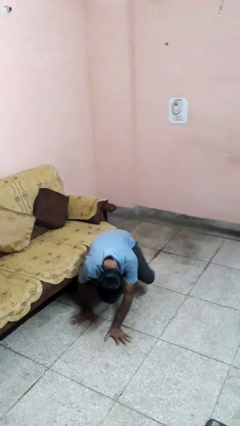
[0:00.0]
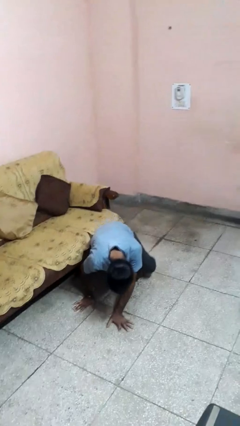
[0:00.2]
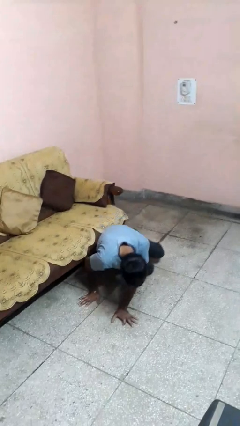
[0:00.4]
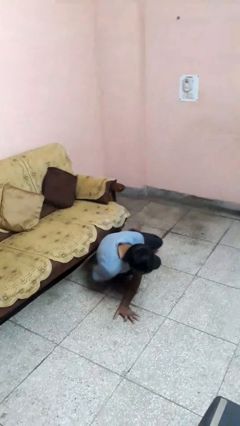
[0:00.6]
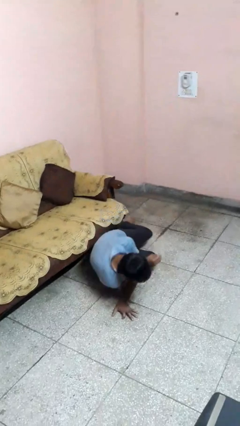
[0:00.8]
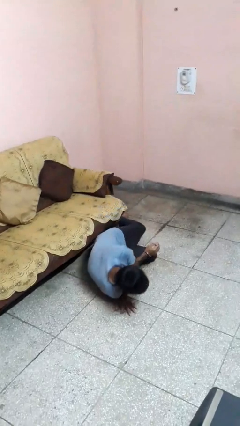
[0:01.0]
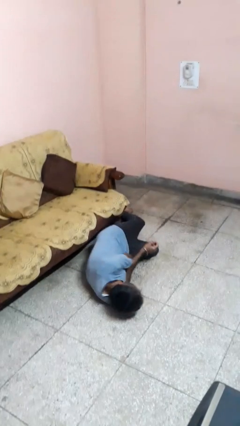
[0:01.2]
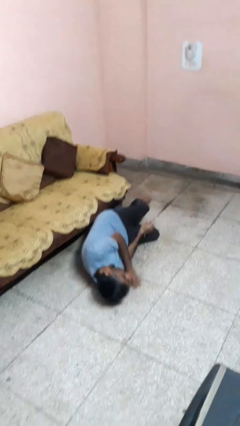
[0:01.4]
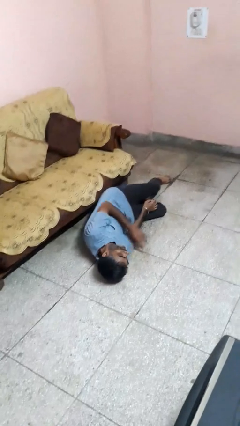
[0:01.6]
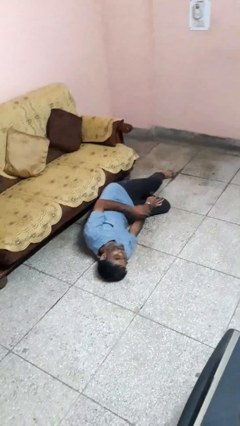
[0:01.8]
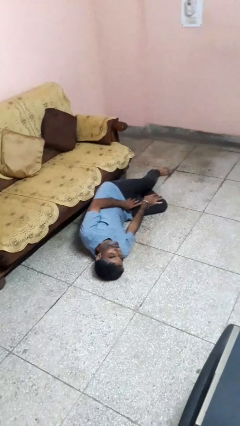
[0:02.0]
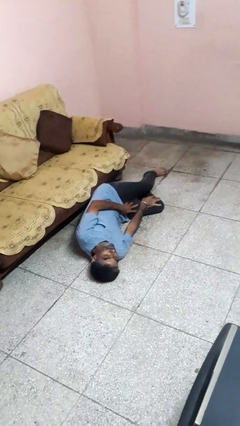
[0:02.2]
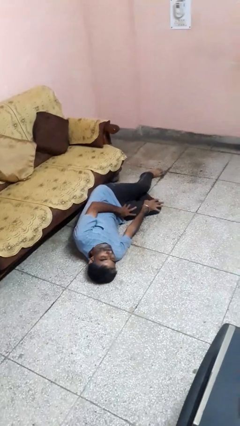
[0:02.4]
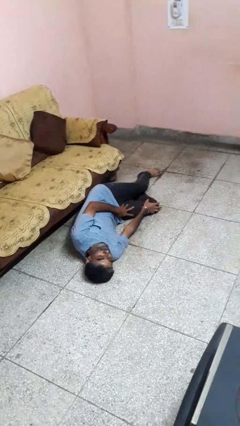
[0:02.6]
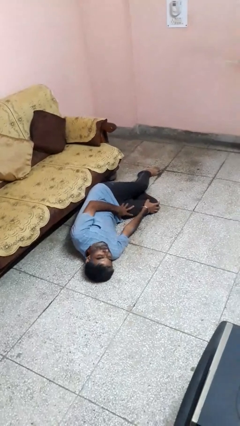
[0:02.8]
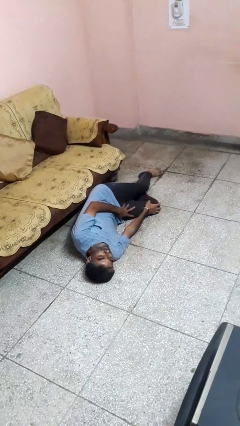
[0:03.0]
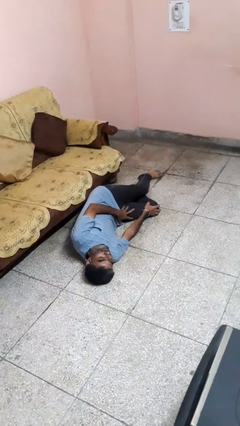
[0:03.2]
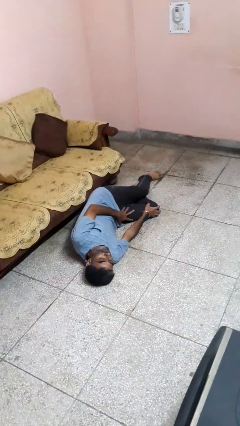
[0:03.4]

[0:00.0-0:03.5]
person lies down on floor

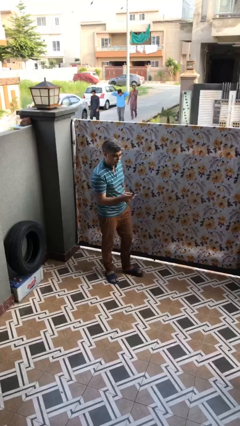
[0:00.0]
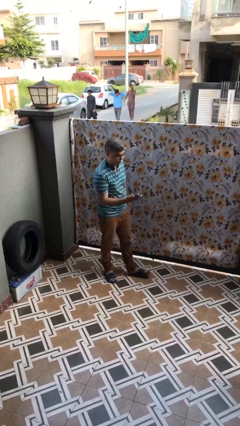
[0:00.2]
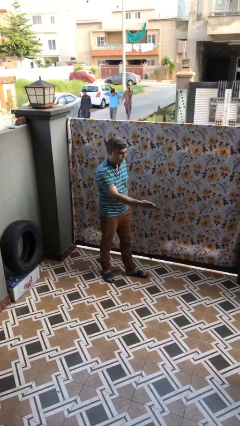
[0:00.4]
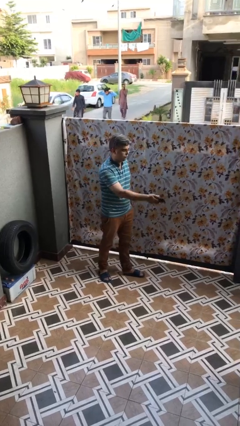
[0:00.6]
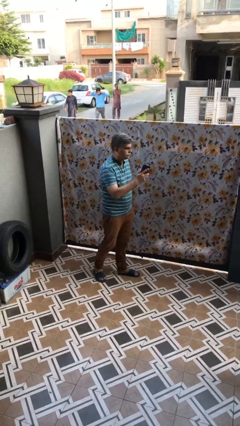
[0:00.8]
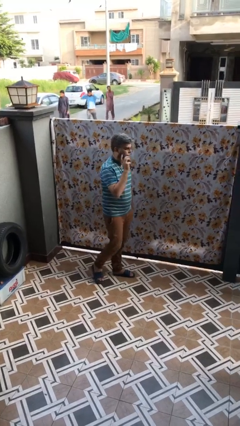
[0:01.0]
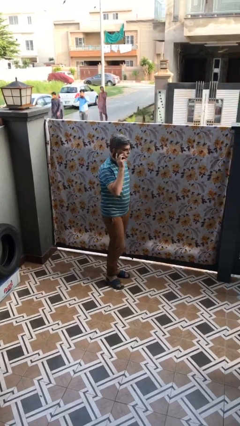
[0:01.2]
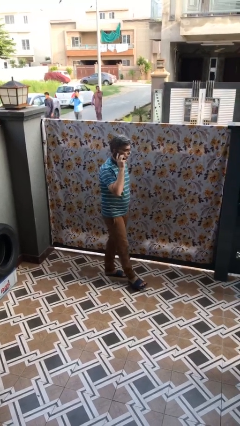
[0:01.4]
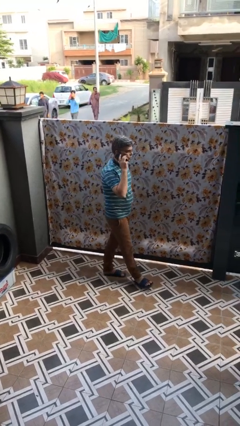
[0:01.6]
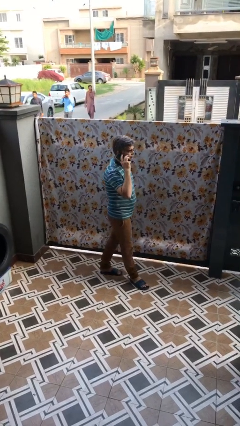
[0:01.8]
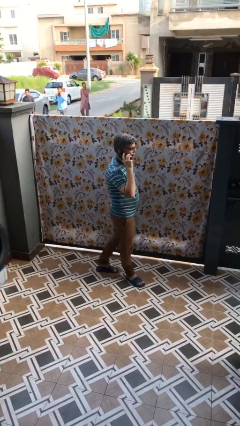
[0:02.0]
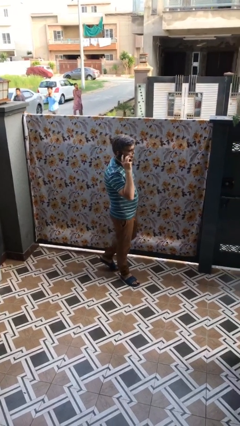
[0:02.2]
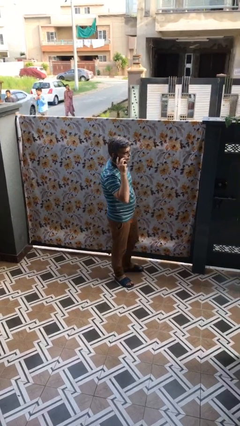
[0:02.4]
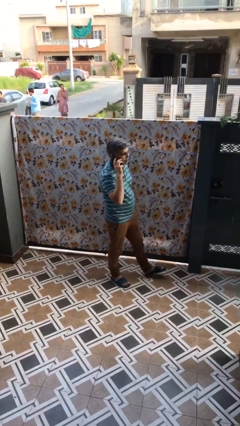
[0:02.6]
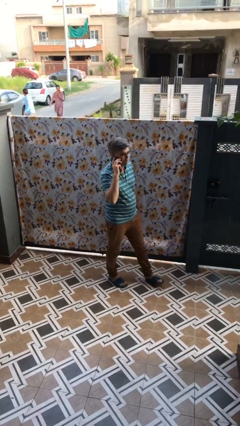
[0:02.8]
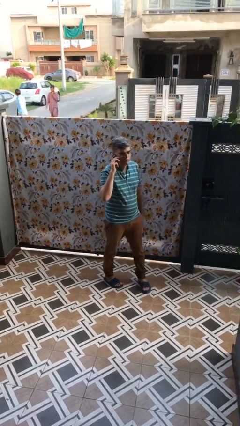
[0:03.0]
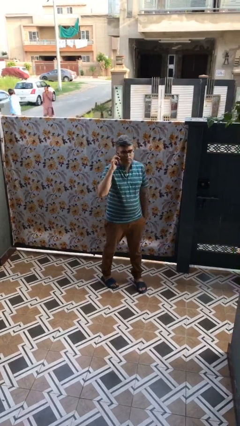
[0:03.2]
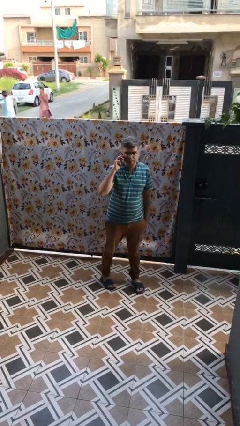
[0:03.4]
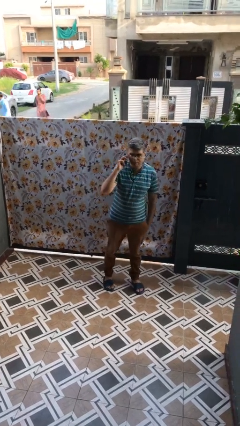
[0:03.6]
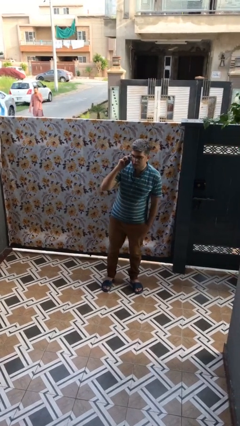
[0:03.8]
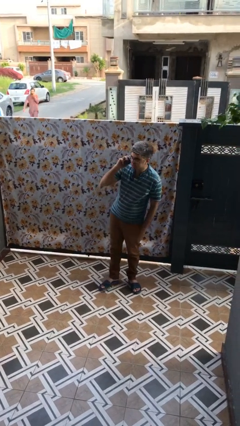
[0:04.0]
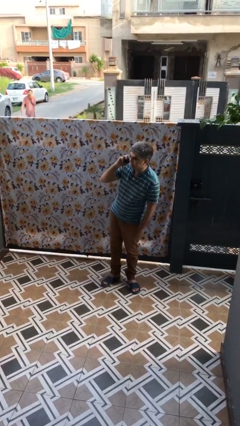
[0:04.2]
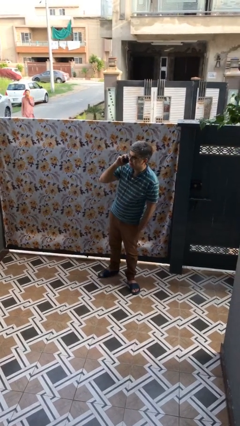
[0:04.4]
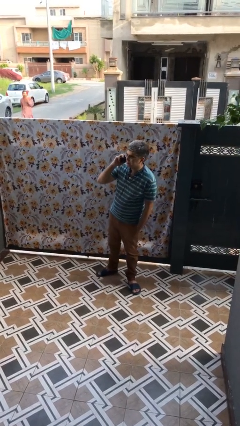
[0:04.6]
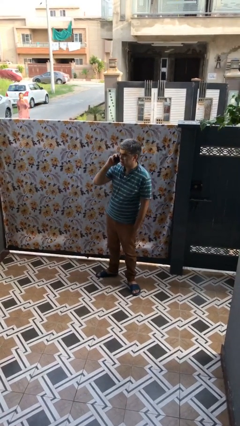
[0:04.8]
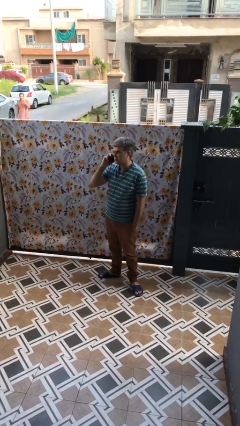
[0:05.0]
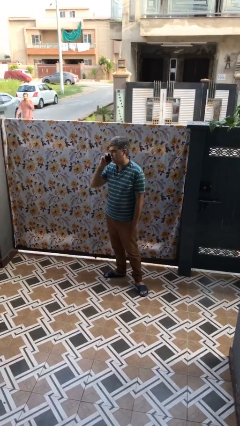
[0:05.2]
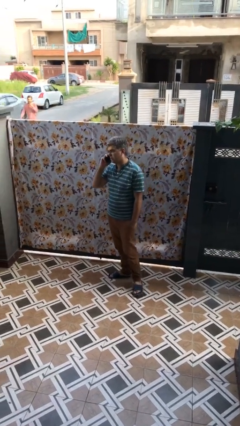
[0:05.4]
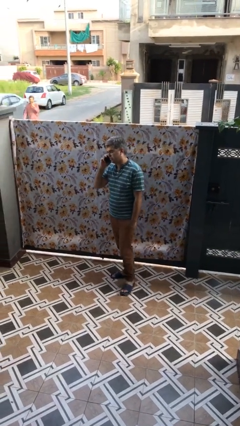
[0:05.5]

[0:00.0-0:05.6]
person talks on phone

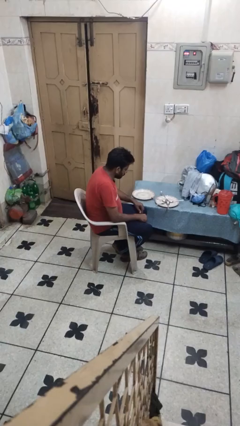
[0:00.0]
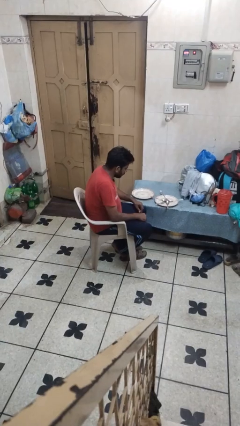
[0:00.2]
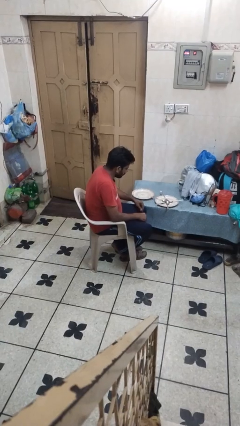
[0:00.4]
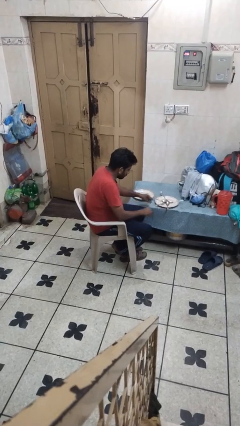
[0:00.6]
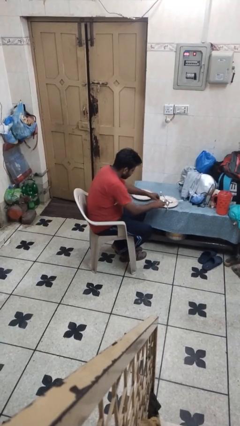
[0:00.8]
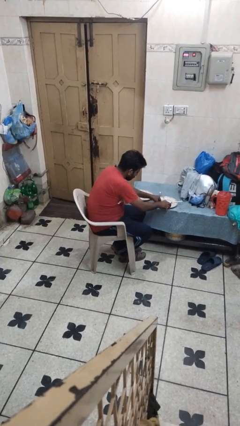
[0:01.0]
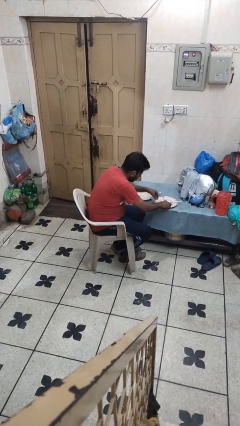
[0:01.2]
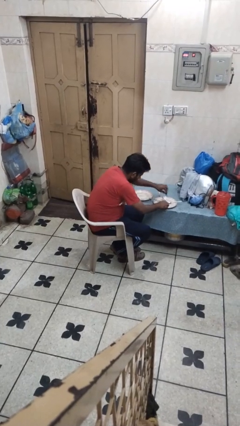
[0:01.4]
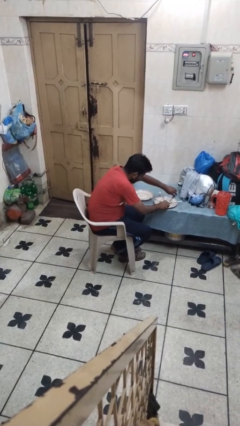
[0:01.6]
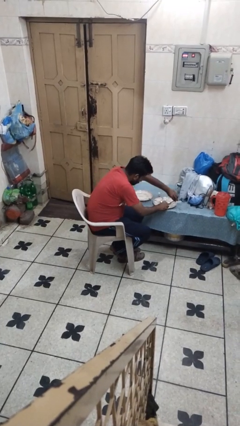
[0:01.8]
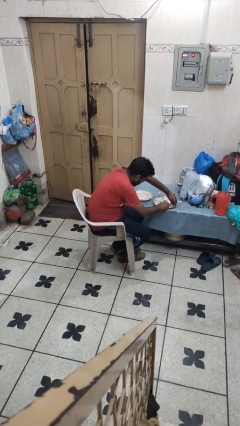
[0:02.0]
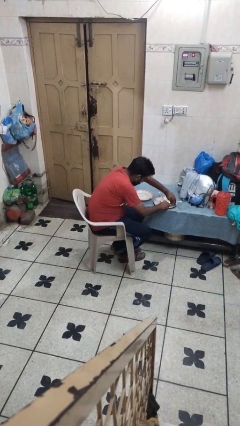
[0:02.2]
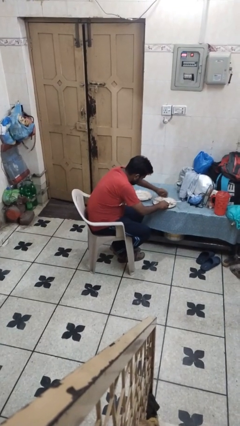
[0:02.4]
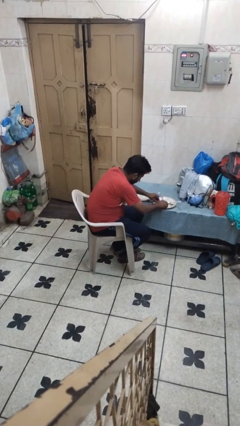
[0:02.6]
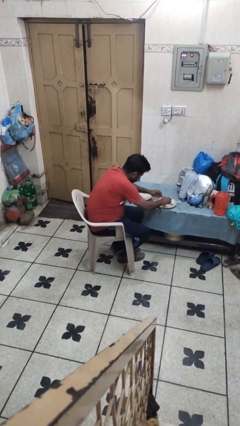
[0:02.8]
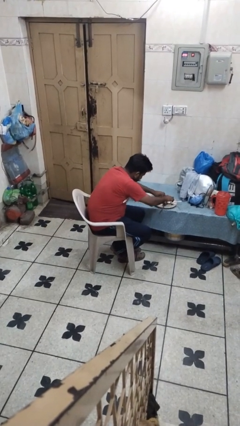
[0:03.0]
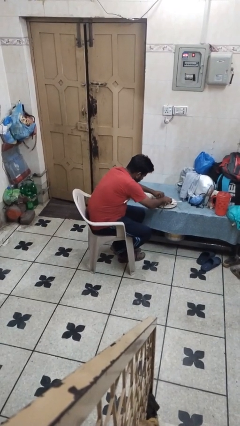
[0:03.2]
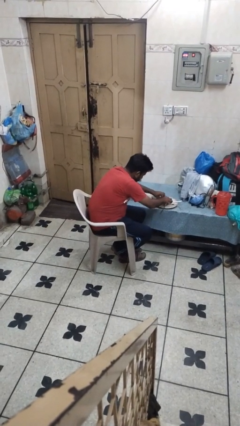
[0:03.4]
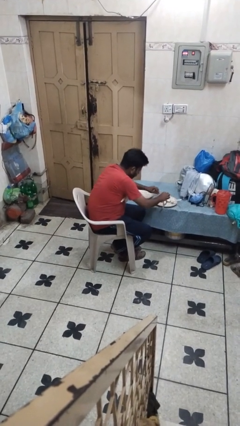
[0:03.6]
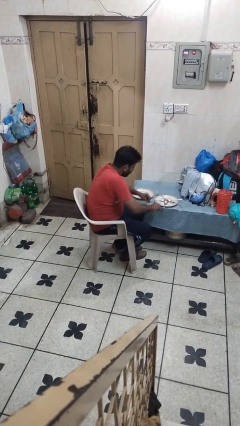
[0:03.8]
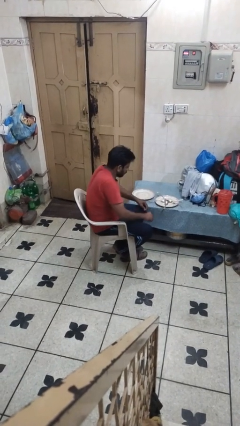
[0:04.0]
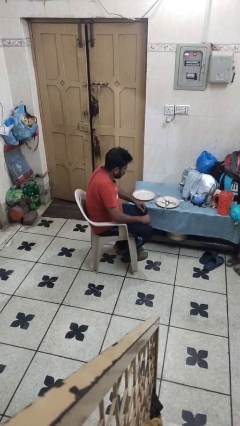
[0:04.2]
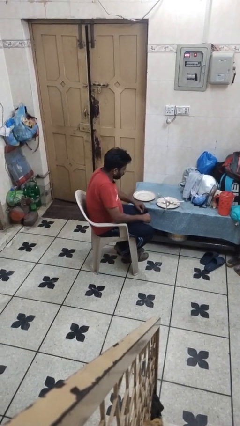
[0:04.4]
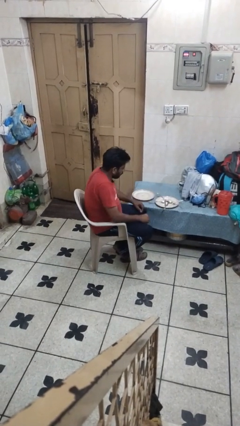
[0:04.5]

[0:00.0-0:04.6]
person sets table

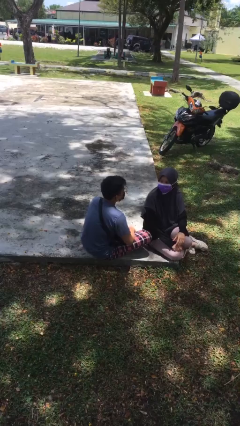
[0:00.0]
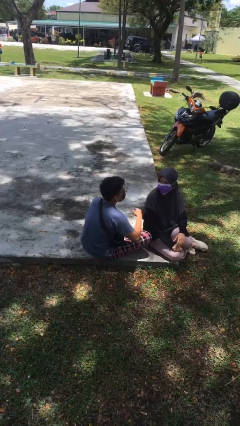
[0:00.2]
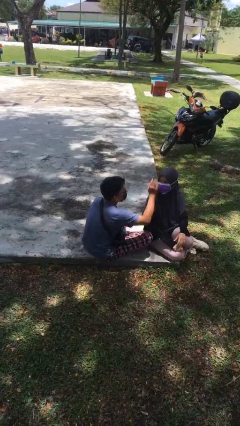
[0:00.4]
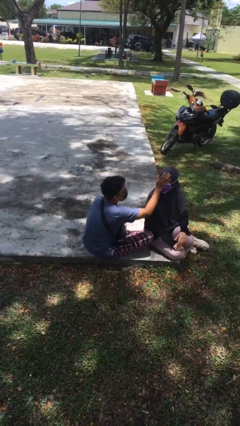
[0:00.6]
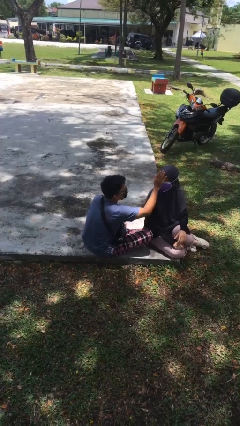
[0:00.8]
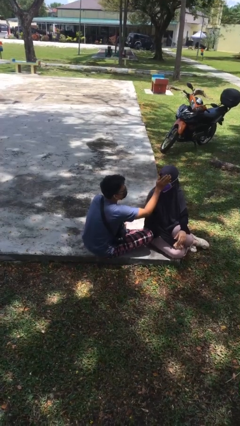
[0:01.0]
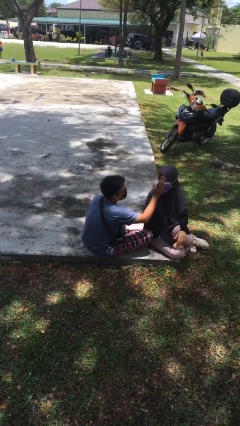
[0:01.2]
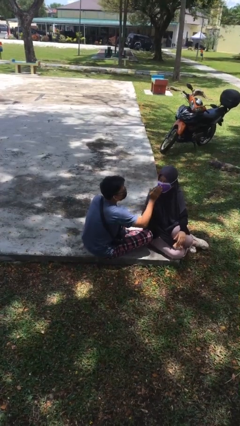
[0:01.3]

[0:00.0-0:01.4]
person touches face of person

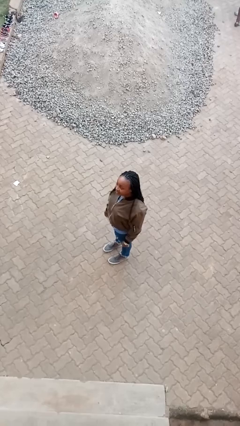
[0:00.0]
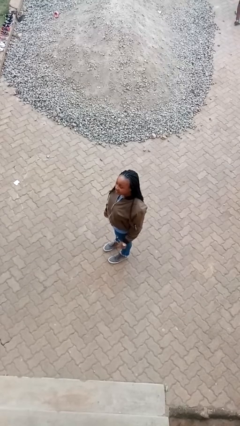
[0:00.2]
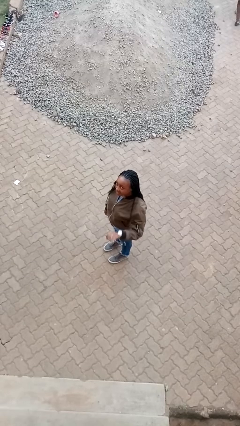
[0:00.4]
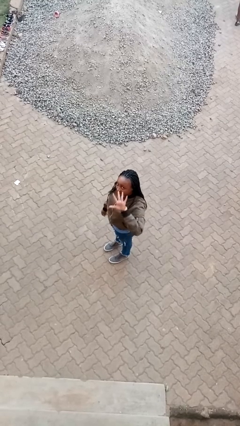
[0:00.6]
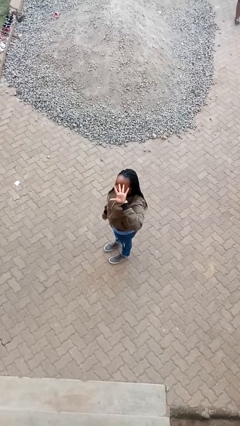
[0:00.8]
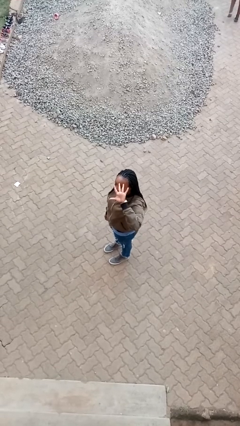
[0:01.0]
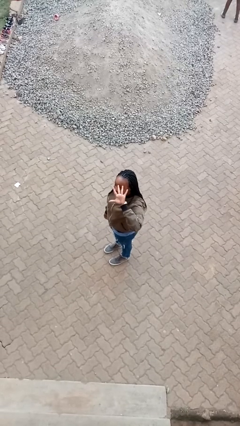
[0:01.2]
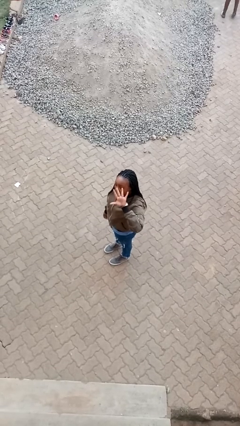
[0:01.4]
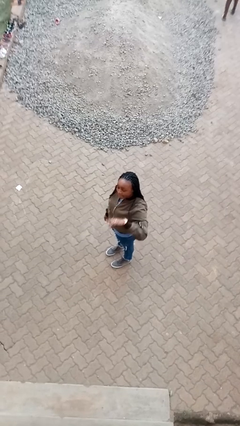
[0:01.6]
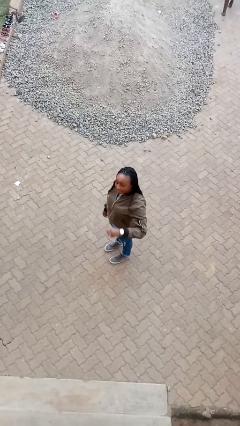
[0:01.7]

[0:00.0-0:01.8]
person gestures number five

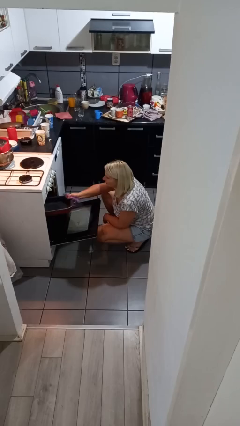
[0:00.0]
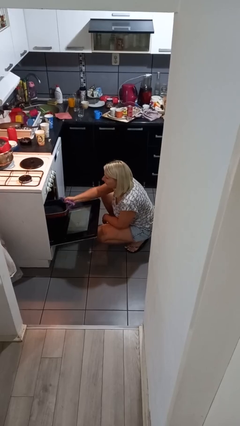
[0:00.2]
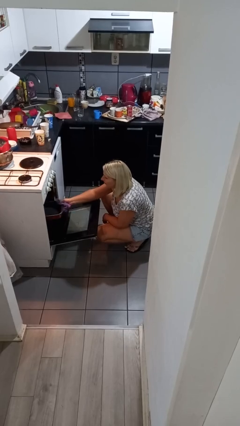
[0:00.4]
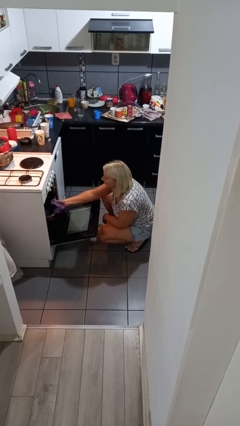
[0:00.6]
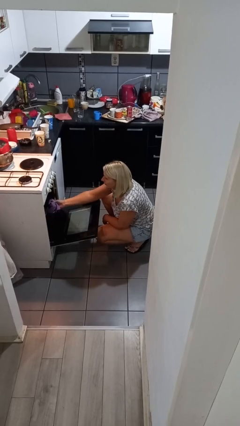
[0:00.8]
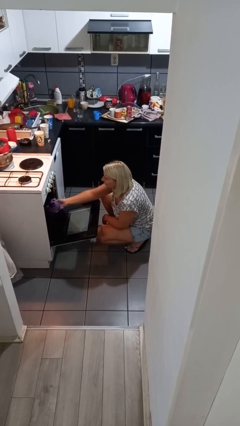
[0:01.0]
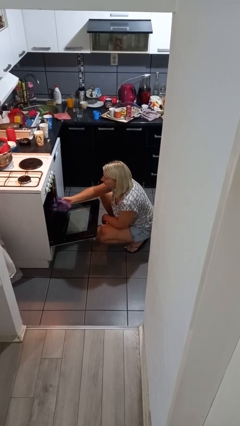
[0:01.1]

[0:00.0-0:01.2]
person puts object into oven
